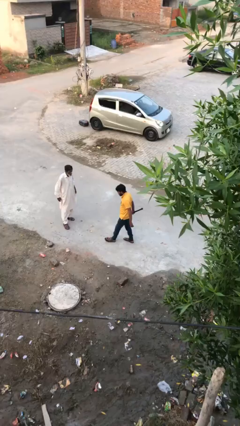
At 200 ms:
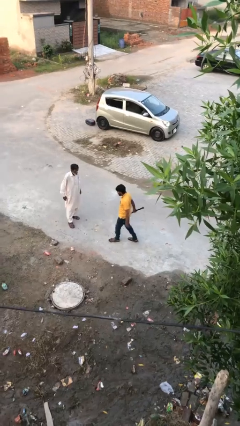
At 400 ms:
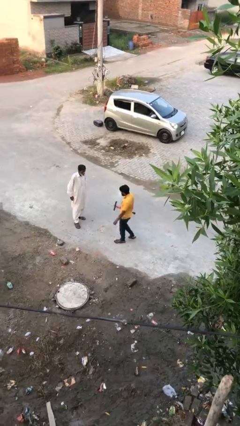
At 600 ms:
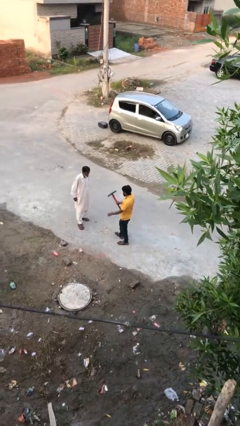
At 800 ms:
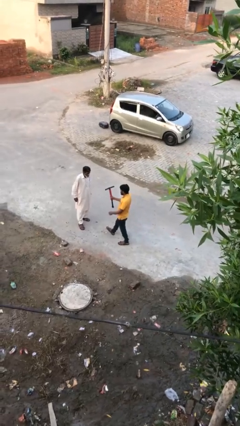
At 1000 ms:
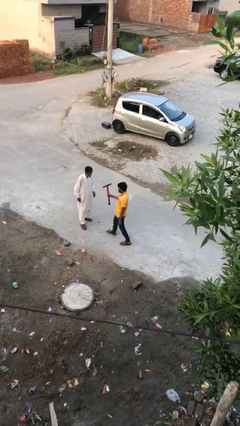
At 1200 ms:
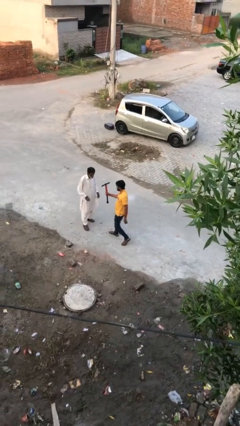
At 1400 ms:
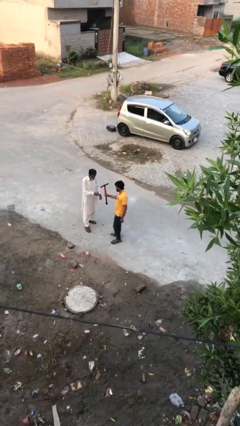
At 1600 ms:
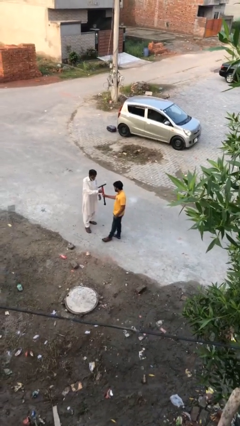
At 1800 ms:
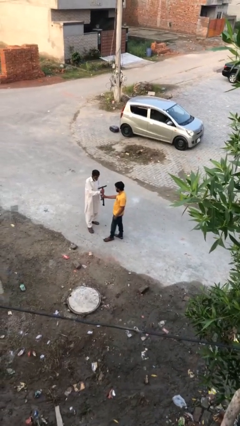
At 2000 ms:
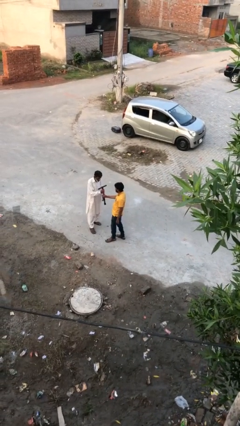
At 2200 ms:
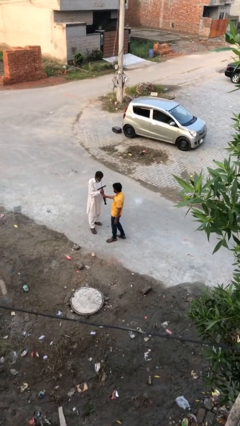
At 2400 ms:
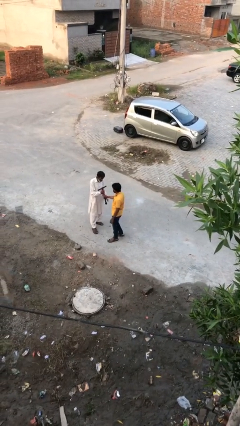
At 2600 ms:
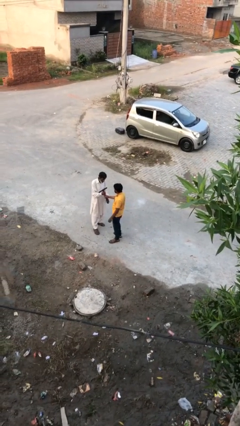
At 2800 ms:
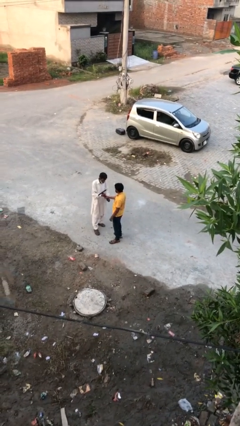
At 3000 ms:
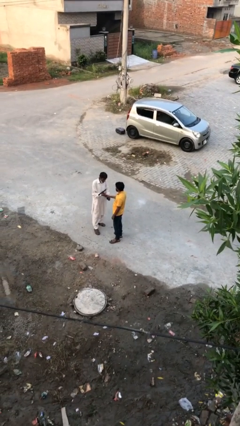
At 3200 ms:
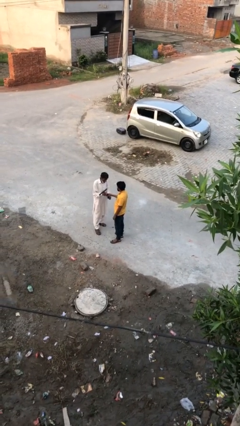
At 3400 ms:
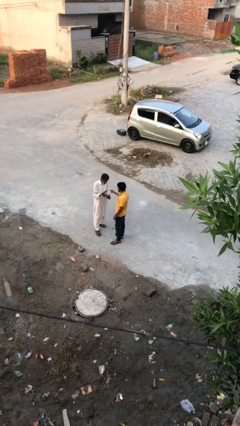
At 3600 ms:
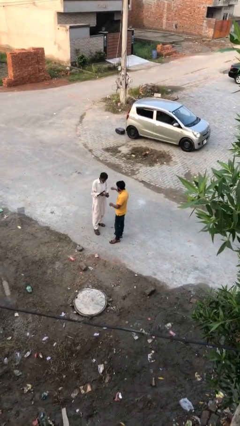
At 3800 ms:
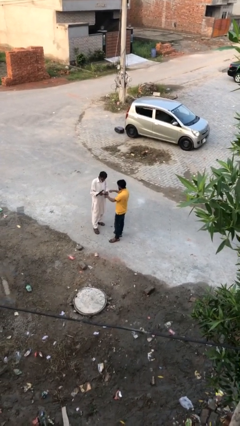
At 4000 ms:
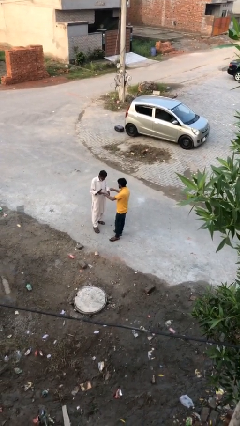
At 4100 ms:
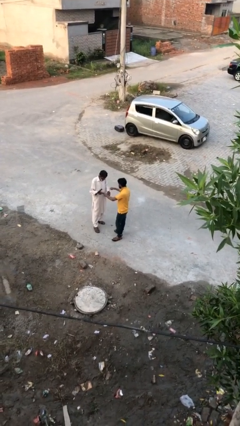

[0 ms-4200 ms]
person transfers object to person

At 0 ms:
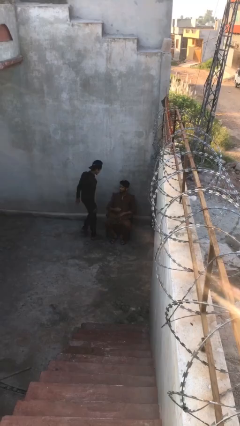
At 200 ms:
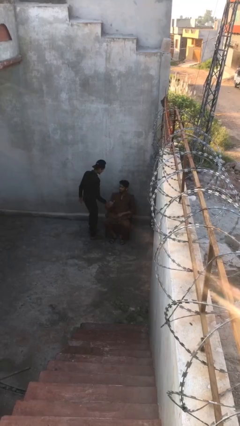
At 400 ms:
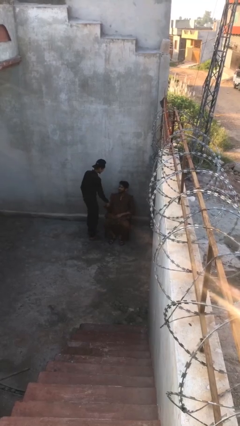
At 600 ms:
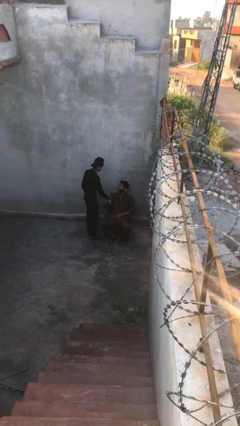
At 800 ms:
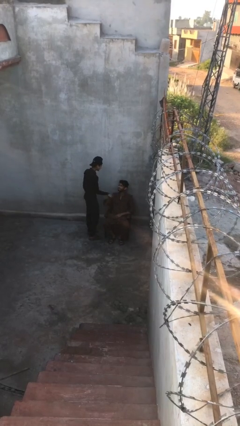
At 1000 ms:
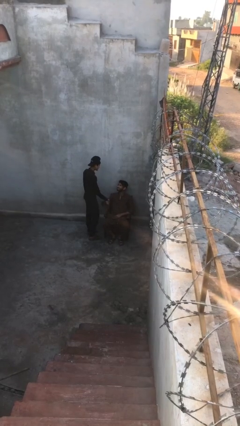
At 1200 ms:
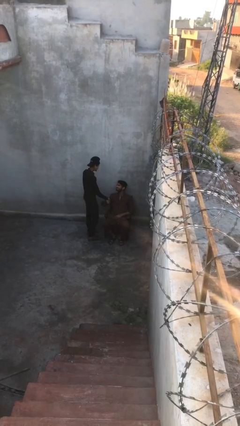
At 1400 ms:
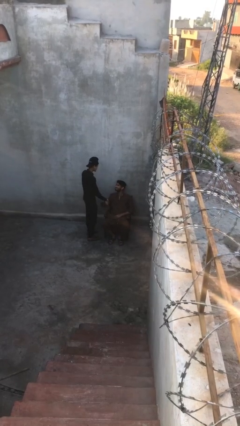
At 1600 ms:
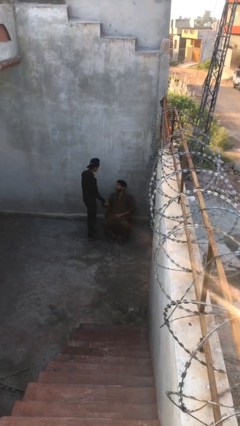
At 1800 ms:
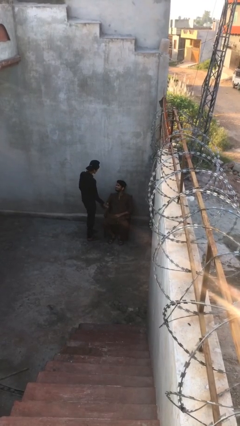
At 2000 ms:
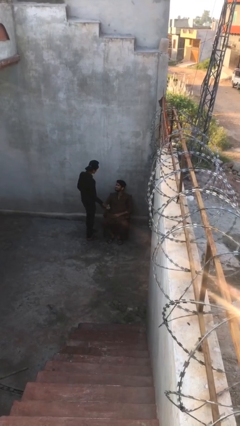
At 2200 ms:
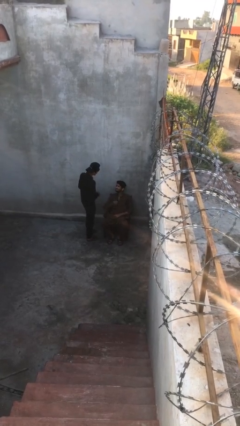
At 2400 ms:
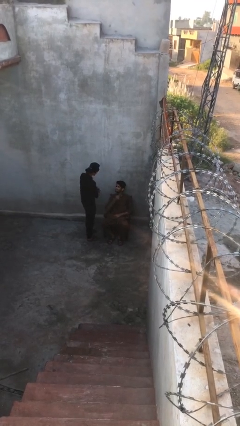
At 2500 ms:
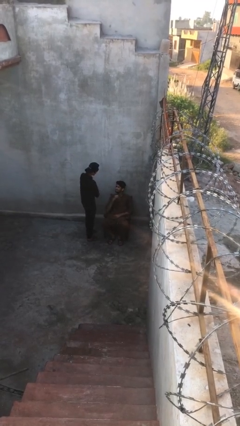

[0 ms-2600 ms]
person shakes hand

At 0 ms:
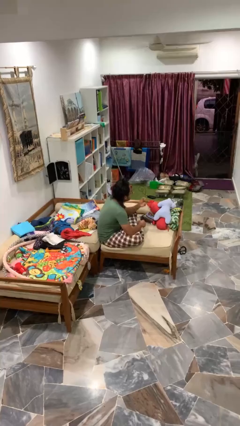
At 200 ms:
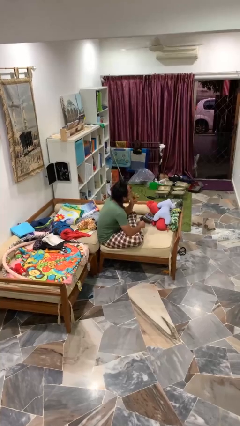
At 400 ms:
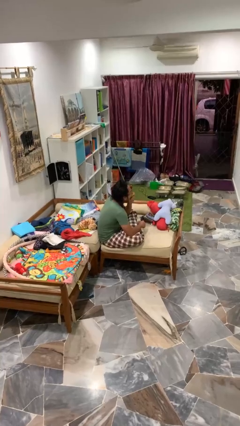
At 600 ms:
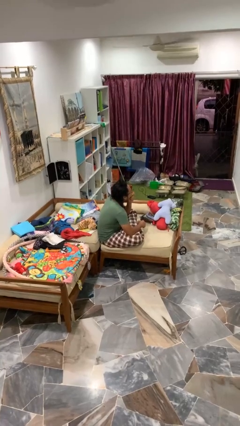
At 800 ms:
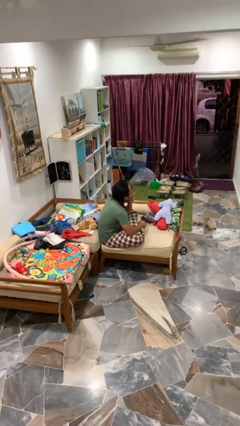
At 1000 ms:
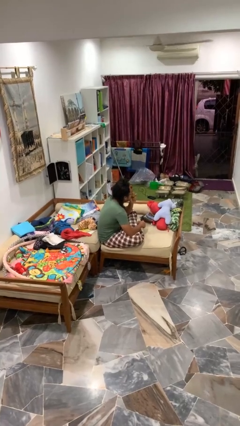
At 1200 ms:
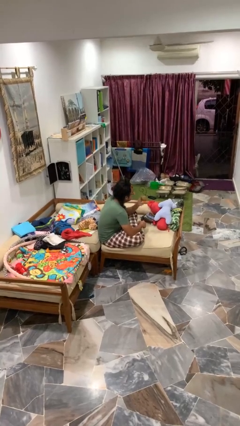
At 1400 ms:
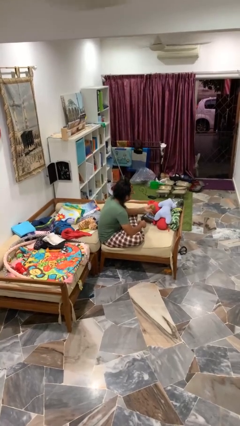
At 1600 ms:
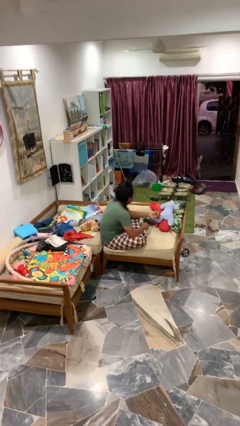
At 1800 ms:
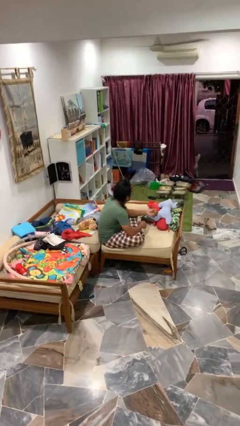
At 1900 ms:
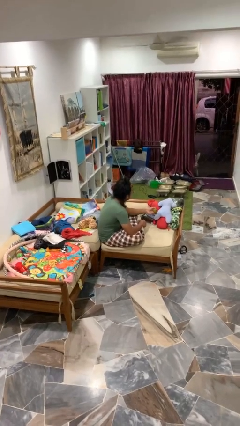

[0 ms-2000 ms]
person eats apple

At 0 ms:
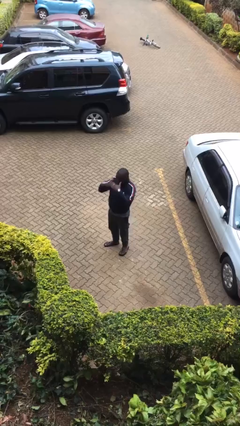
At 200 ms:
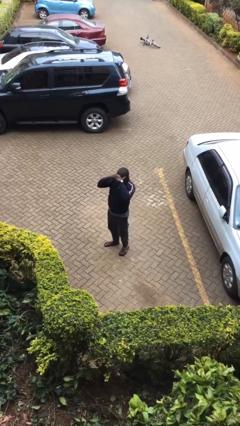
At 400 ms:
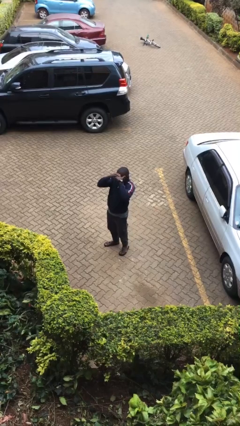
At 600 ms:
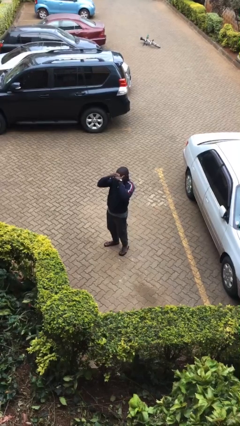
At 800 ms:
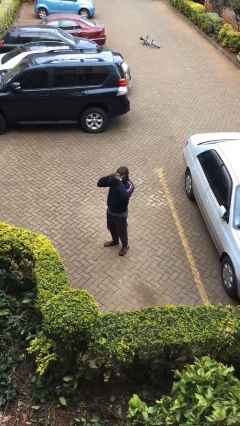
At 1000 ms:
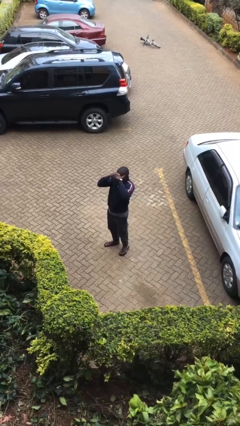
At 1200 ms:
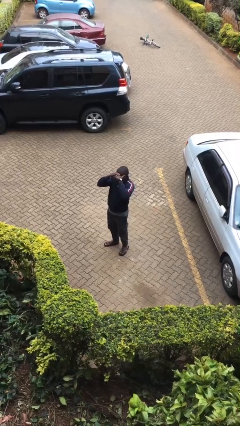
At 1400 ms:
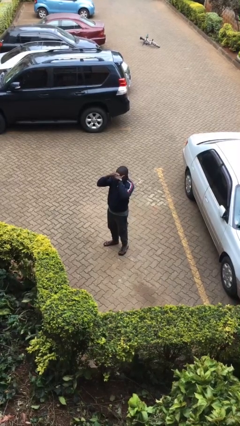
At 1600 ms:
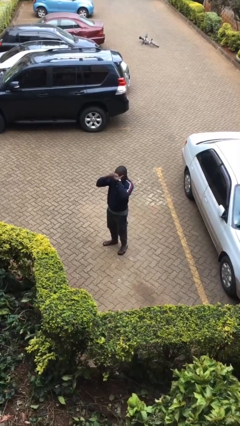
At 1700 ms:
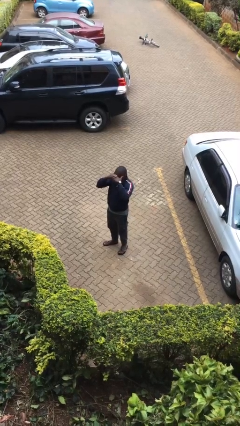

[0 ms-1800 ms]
person shades eyes

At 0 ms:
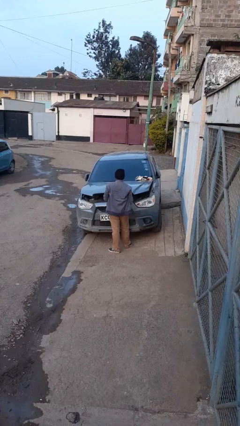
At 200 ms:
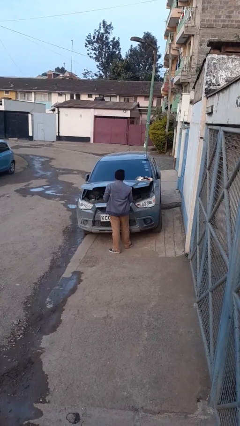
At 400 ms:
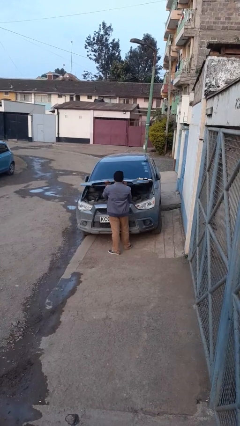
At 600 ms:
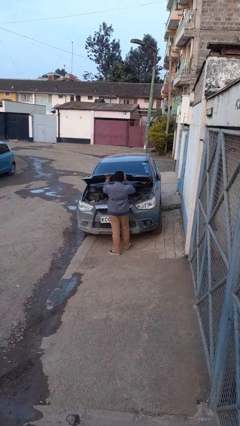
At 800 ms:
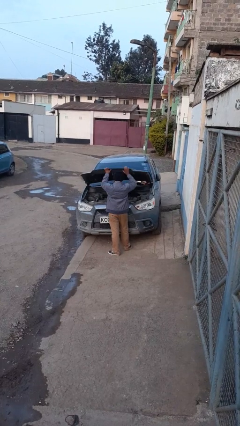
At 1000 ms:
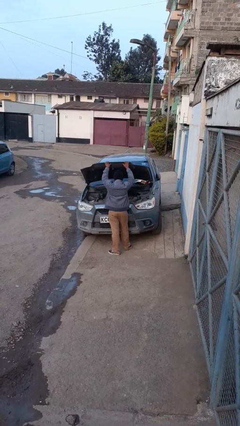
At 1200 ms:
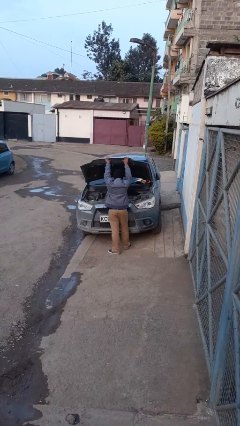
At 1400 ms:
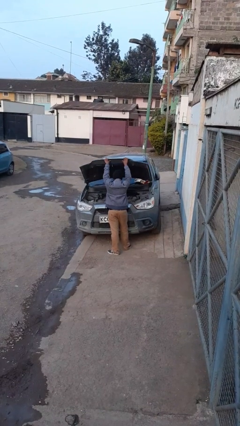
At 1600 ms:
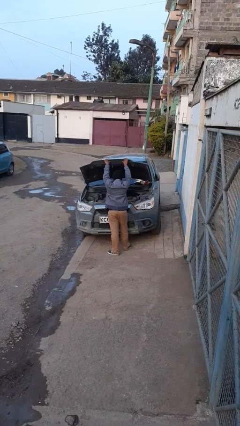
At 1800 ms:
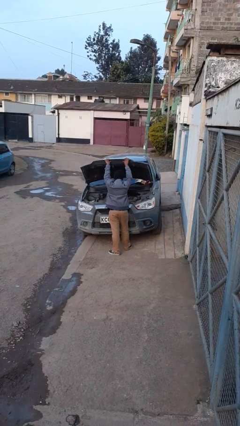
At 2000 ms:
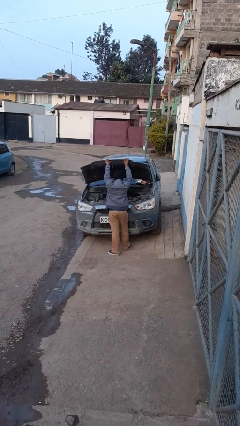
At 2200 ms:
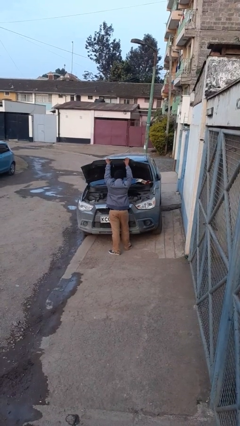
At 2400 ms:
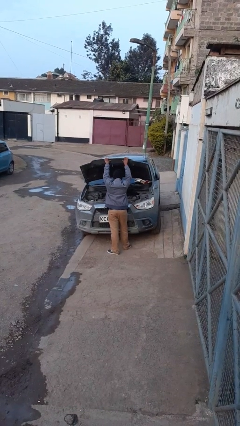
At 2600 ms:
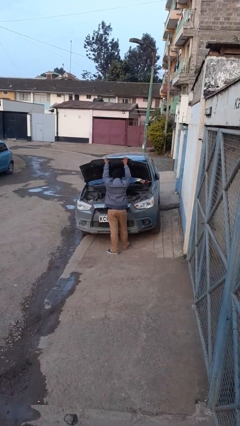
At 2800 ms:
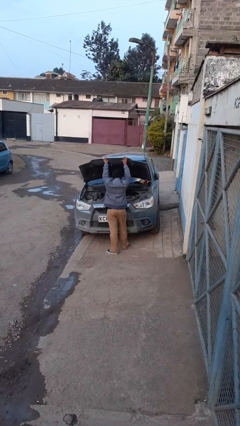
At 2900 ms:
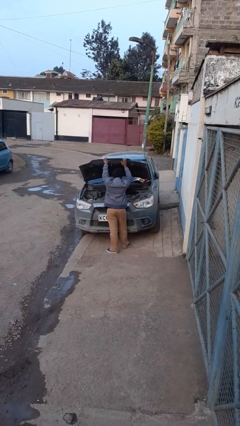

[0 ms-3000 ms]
person opens car hood

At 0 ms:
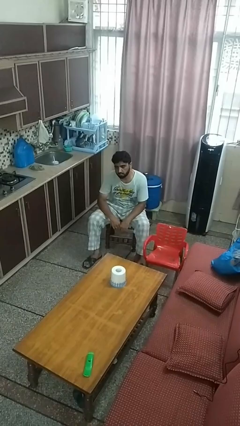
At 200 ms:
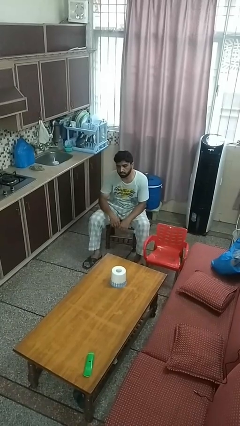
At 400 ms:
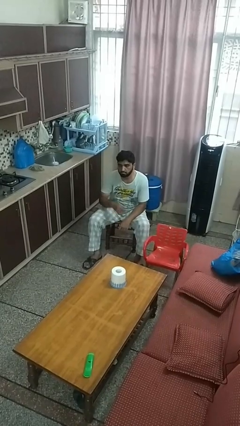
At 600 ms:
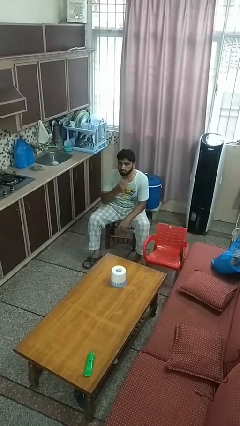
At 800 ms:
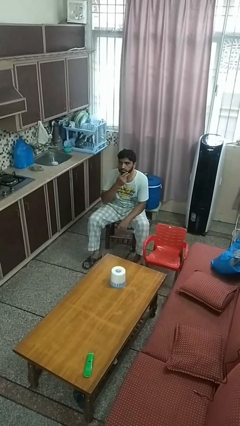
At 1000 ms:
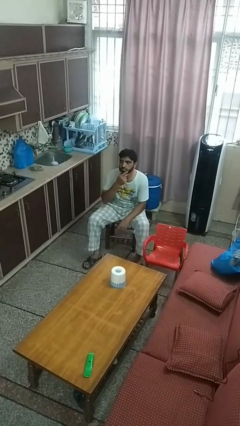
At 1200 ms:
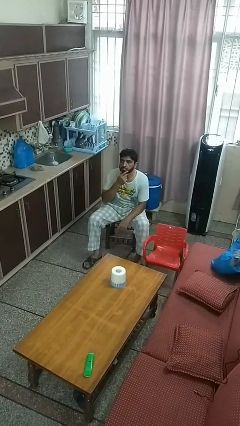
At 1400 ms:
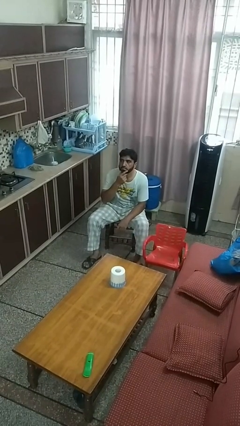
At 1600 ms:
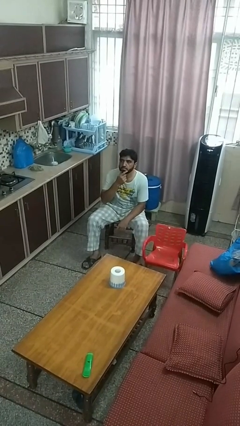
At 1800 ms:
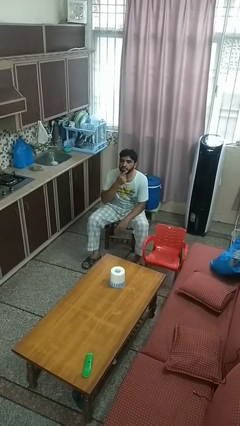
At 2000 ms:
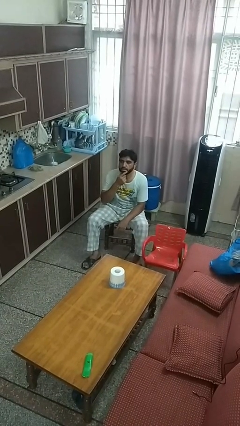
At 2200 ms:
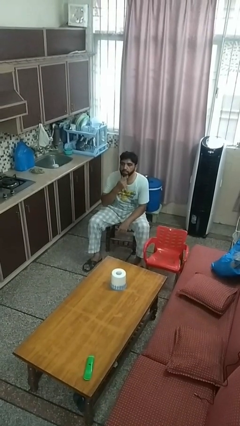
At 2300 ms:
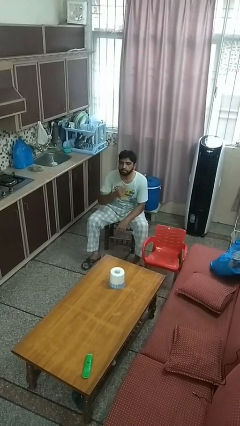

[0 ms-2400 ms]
person strokes chin

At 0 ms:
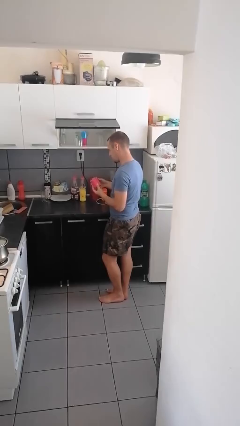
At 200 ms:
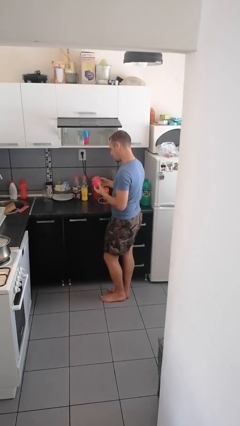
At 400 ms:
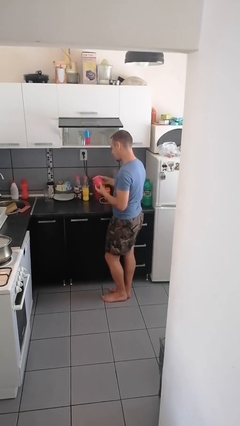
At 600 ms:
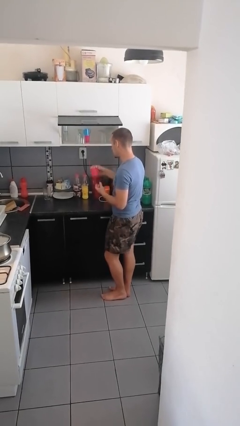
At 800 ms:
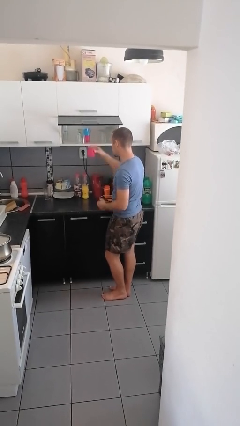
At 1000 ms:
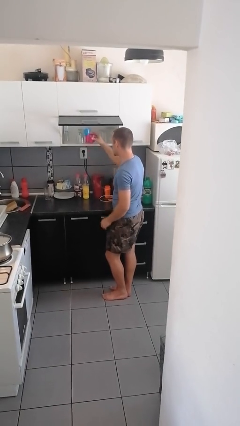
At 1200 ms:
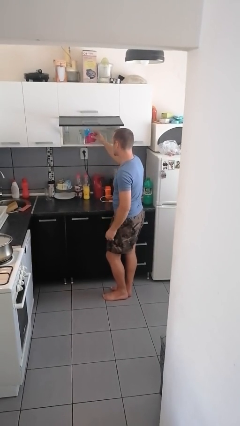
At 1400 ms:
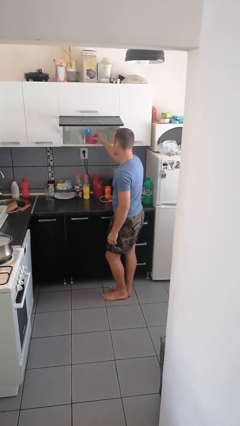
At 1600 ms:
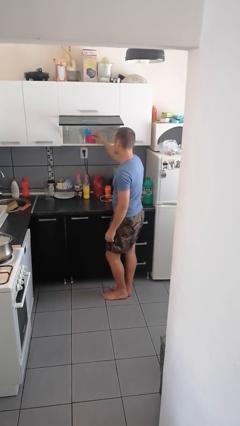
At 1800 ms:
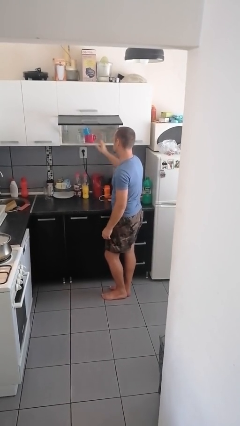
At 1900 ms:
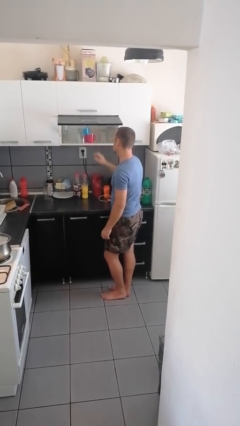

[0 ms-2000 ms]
person puts down object into cabinet
